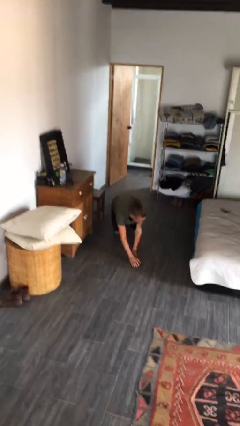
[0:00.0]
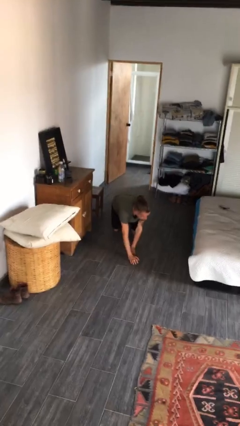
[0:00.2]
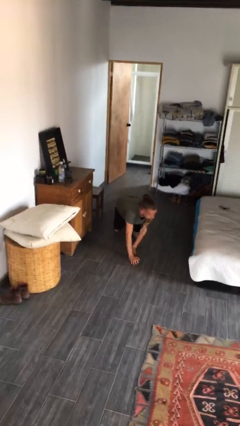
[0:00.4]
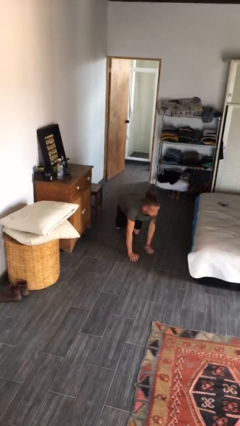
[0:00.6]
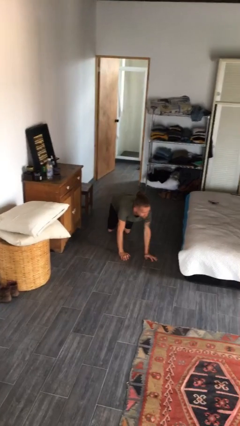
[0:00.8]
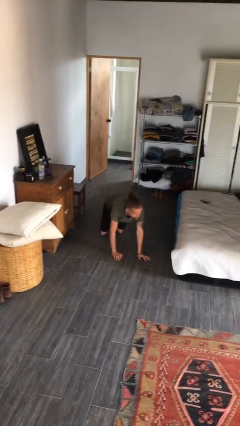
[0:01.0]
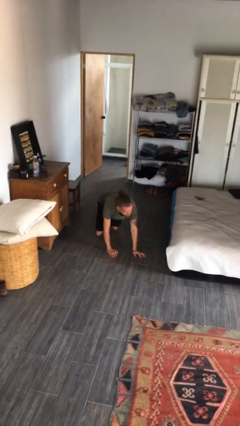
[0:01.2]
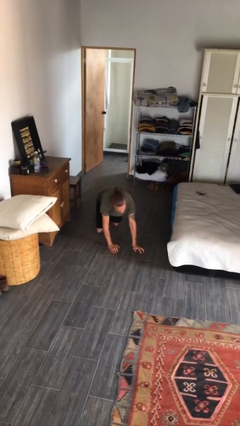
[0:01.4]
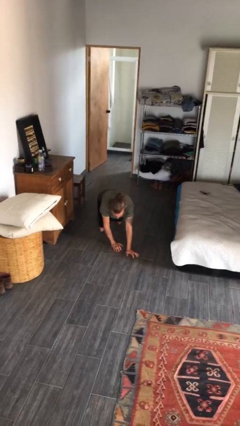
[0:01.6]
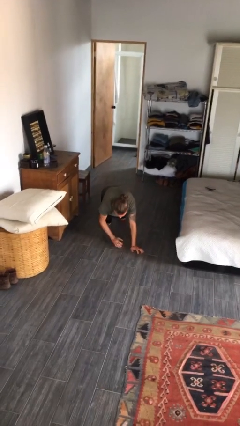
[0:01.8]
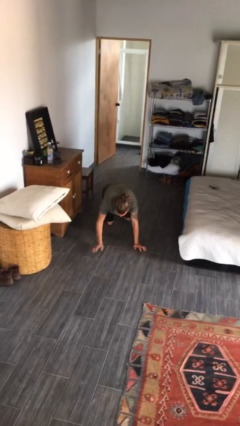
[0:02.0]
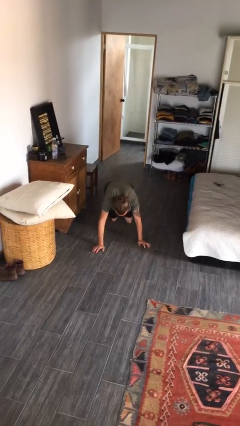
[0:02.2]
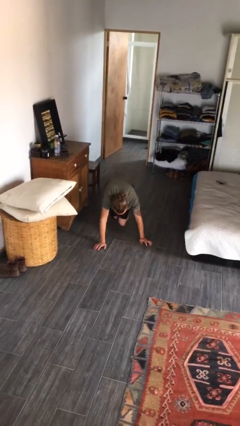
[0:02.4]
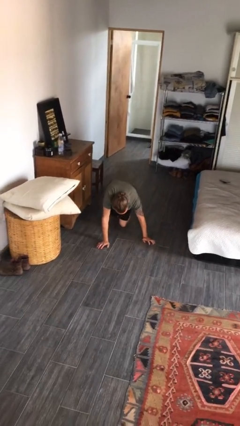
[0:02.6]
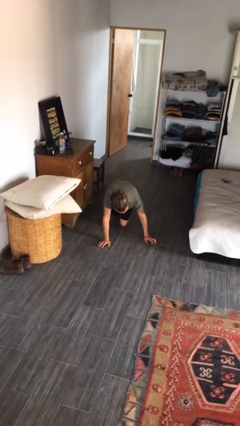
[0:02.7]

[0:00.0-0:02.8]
person crawls

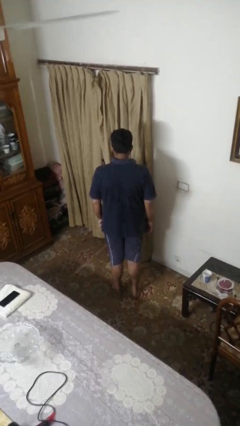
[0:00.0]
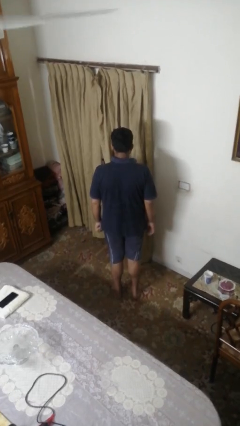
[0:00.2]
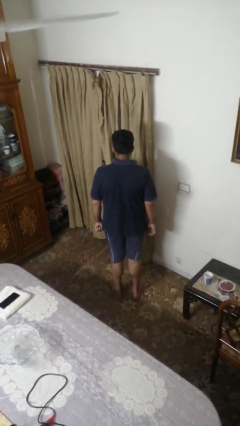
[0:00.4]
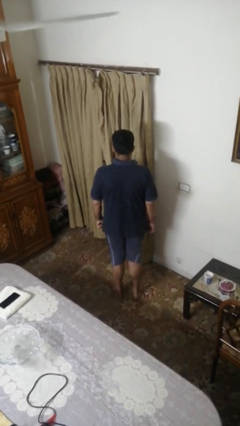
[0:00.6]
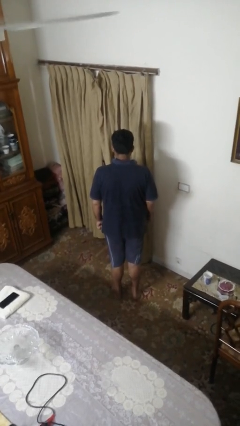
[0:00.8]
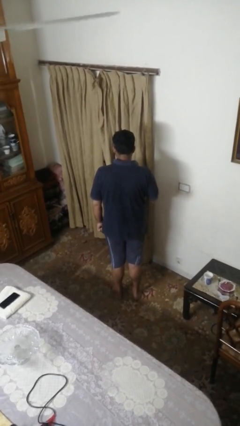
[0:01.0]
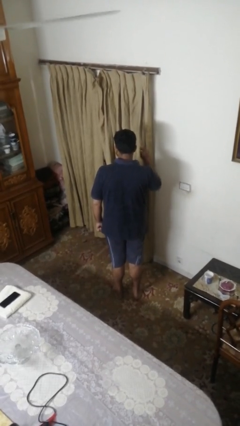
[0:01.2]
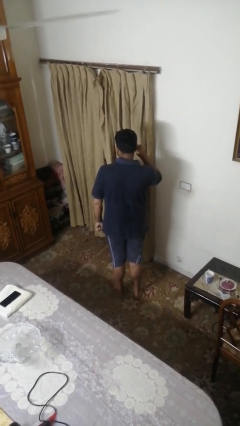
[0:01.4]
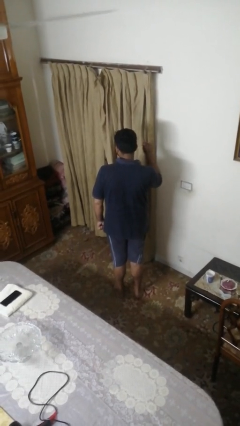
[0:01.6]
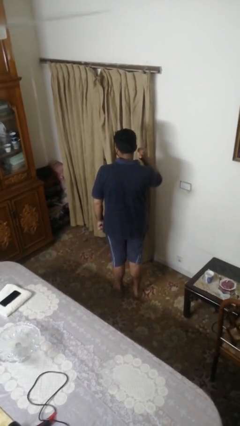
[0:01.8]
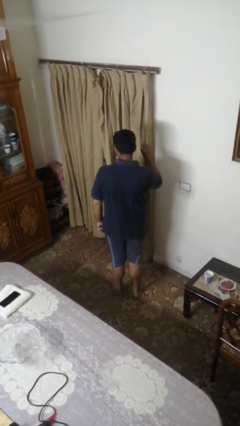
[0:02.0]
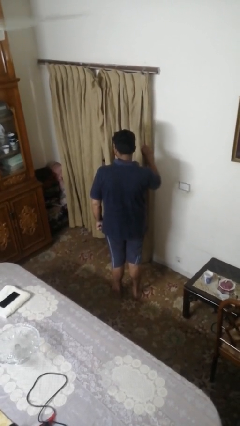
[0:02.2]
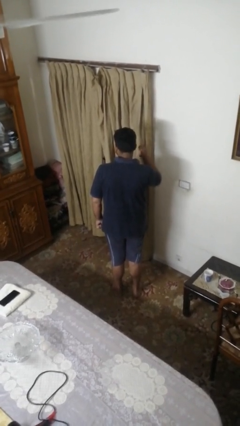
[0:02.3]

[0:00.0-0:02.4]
person gestures behind me

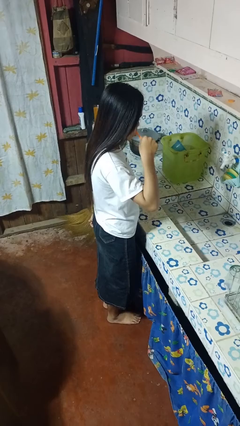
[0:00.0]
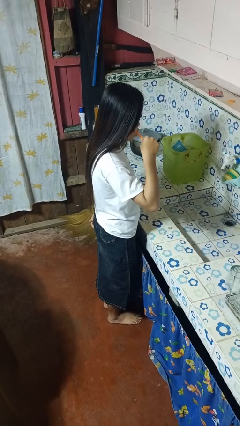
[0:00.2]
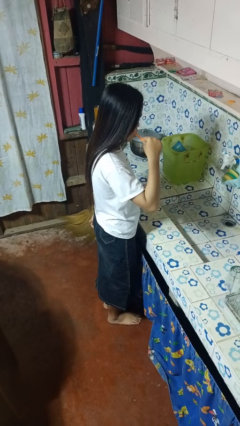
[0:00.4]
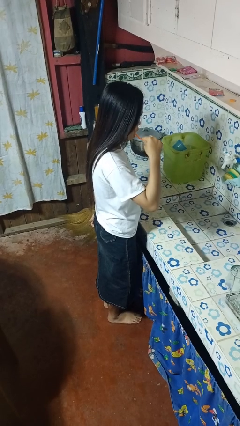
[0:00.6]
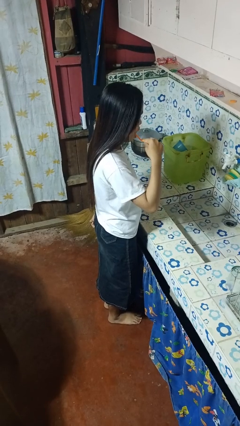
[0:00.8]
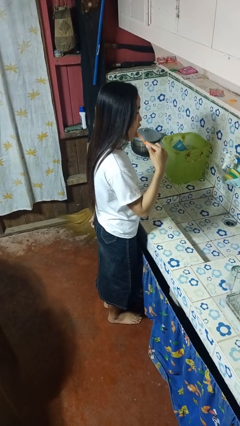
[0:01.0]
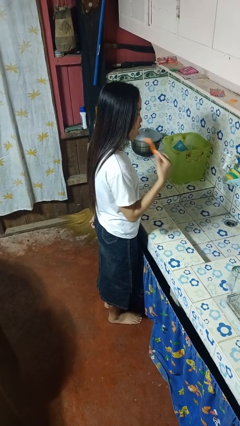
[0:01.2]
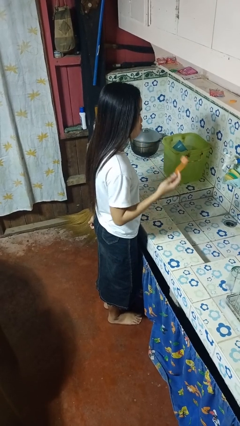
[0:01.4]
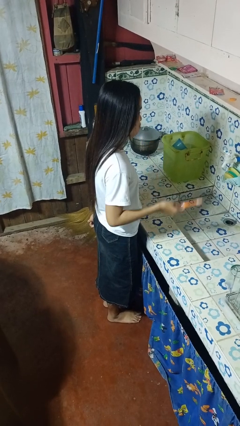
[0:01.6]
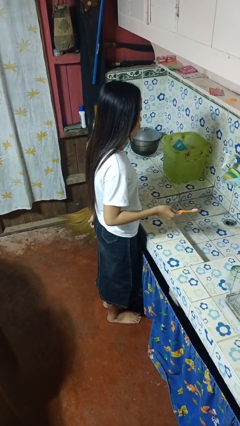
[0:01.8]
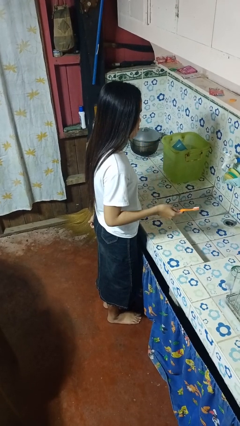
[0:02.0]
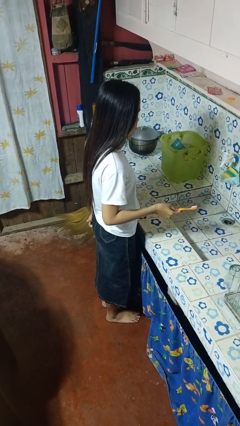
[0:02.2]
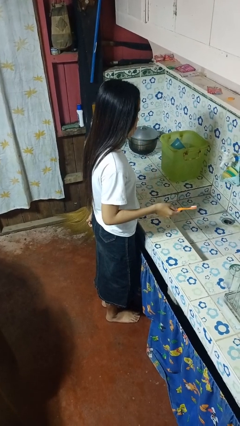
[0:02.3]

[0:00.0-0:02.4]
person brushes teeth

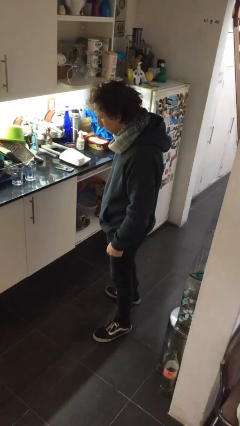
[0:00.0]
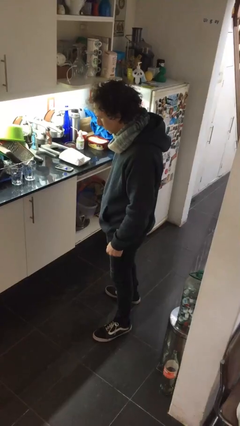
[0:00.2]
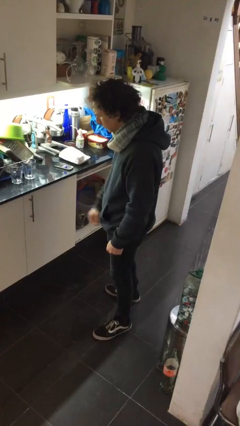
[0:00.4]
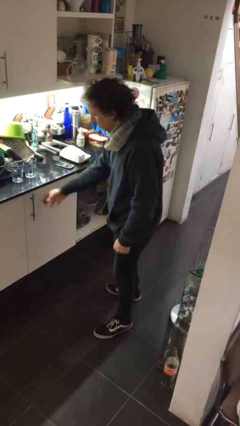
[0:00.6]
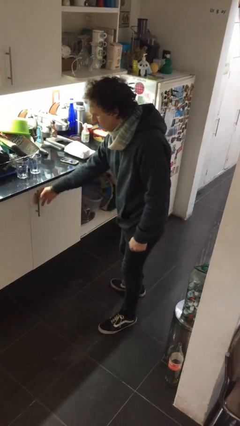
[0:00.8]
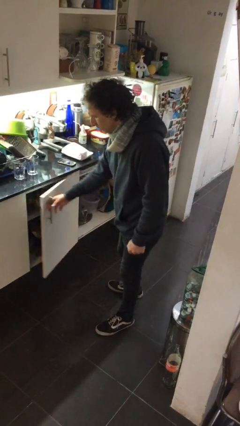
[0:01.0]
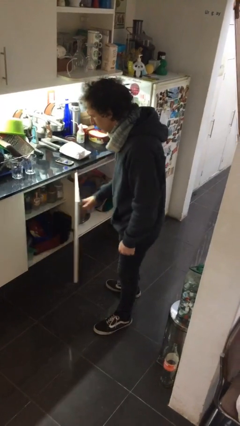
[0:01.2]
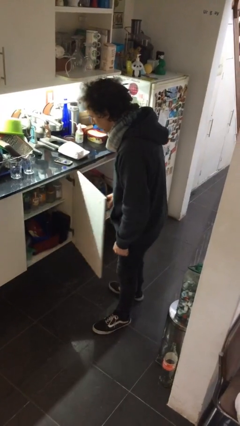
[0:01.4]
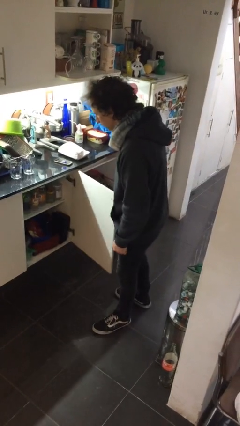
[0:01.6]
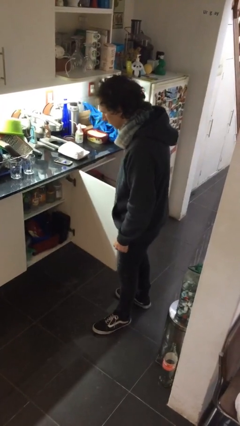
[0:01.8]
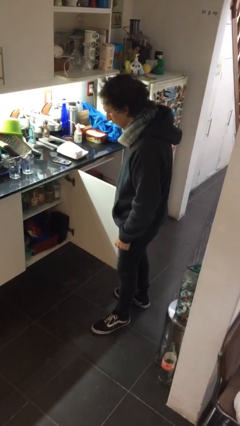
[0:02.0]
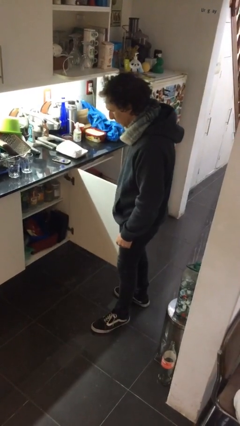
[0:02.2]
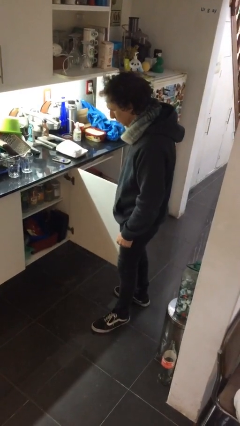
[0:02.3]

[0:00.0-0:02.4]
person closes cabinet

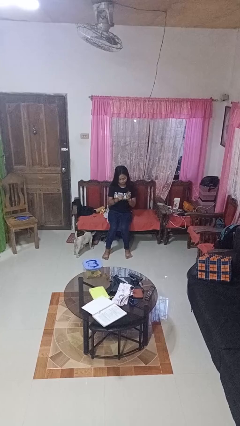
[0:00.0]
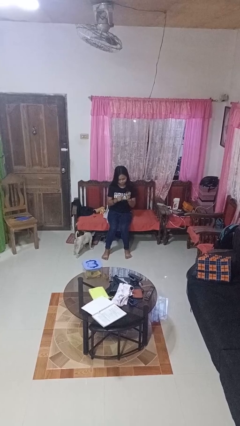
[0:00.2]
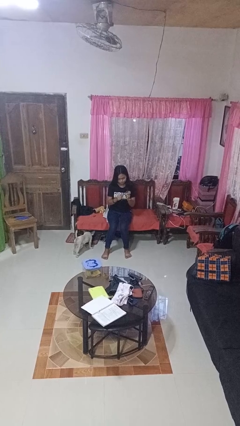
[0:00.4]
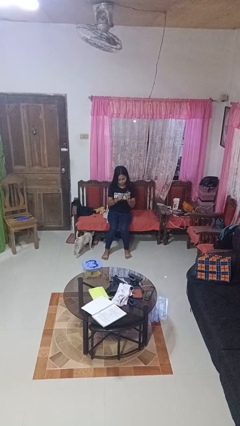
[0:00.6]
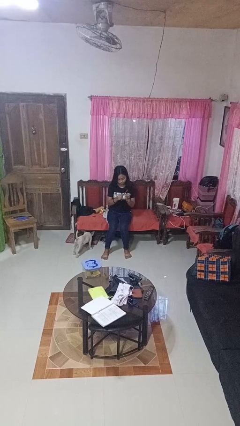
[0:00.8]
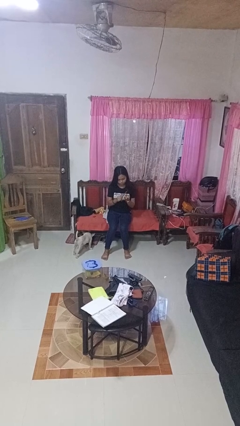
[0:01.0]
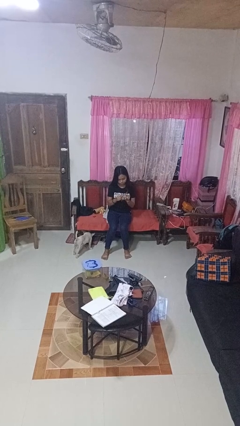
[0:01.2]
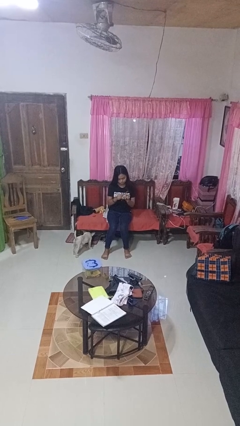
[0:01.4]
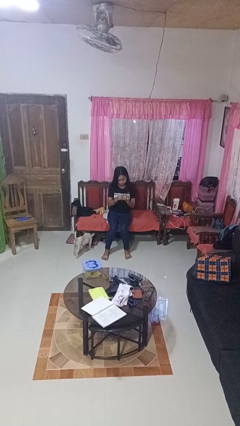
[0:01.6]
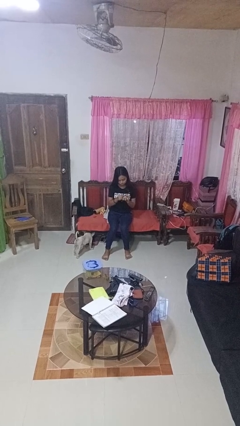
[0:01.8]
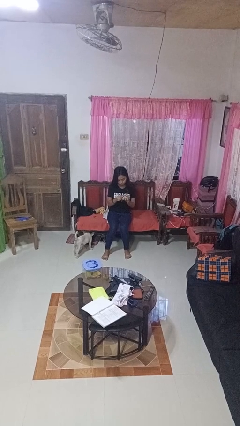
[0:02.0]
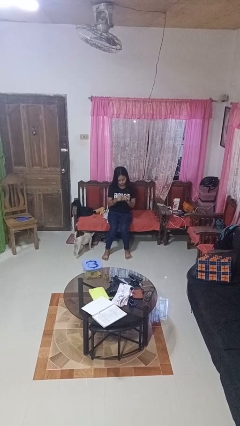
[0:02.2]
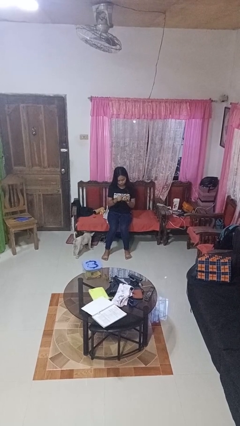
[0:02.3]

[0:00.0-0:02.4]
person files fingernails

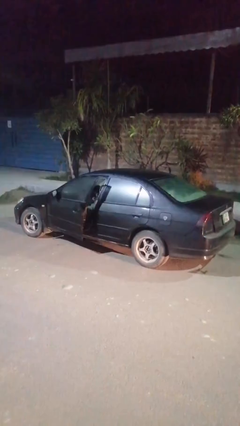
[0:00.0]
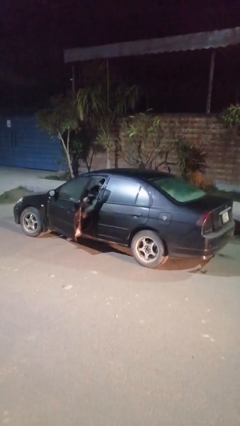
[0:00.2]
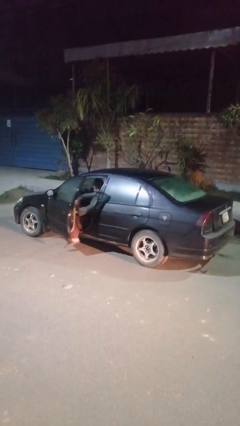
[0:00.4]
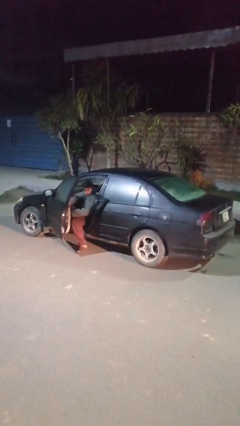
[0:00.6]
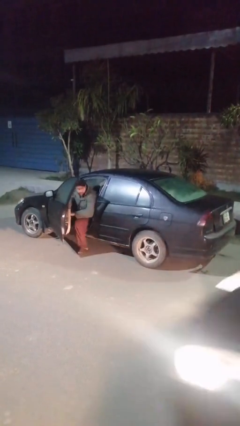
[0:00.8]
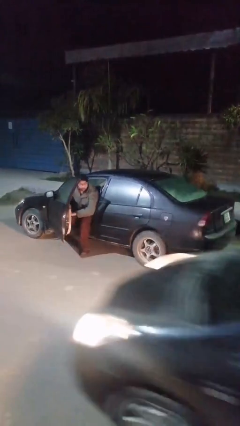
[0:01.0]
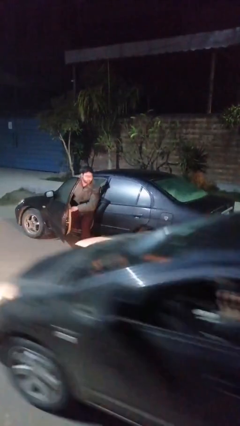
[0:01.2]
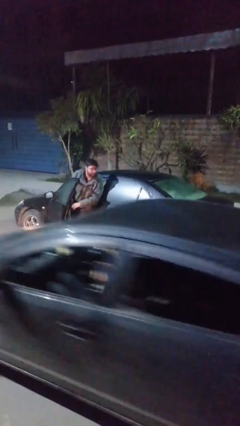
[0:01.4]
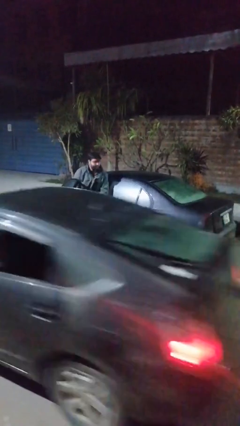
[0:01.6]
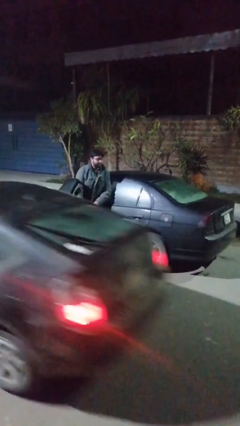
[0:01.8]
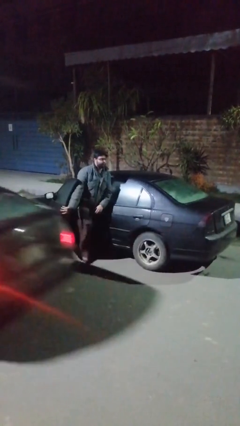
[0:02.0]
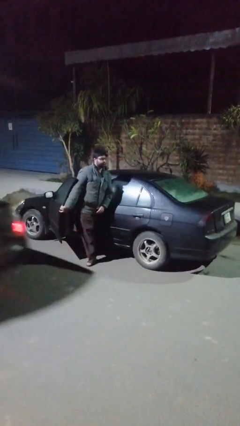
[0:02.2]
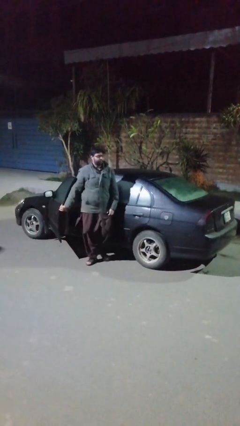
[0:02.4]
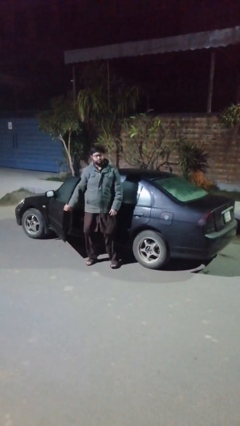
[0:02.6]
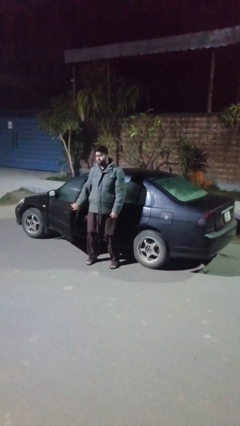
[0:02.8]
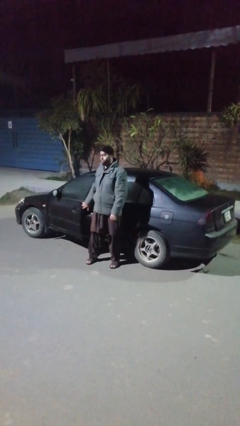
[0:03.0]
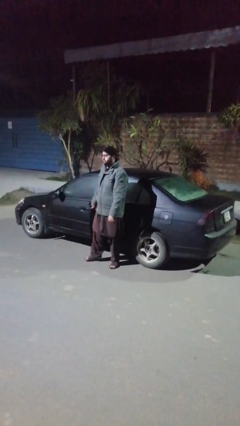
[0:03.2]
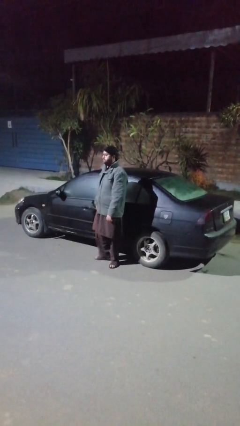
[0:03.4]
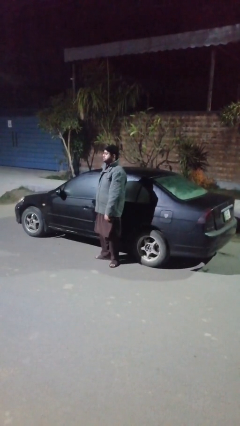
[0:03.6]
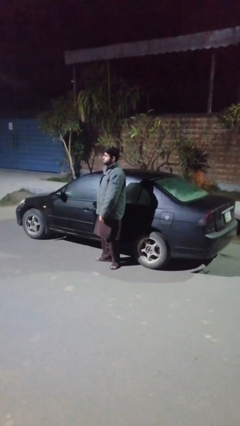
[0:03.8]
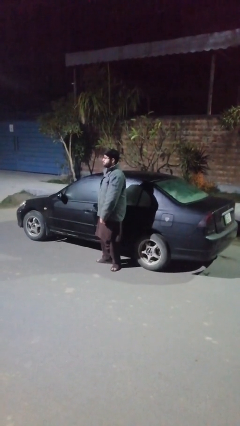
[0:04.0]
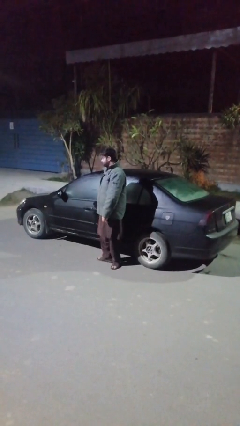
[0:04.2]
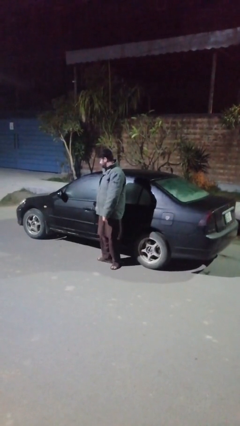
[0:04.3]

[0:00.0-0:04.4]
car drops off person

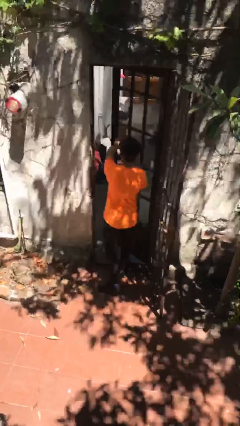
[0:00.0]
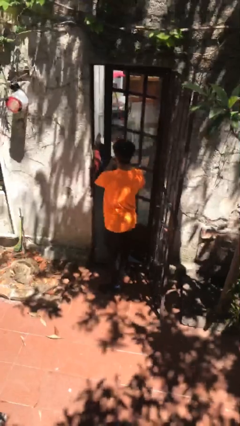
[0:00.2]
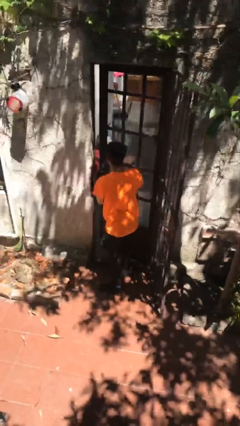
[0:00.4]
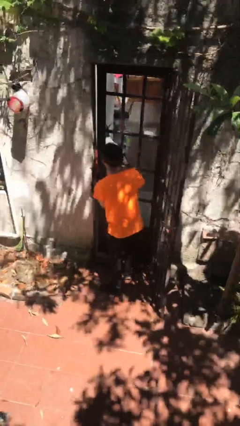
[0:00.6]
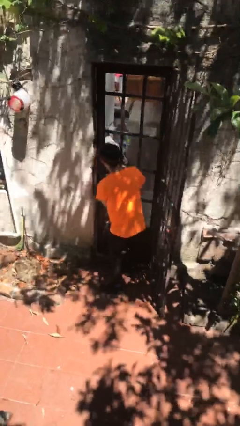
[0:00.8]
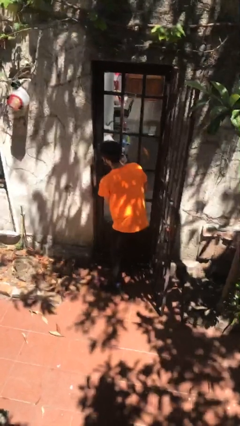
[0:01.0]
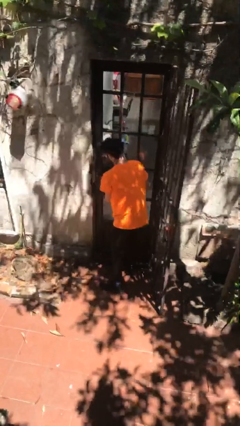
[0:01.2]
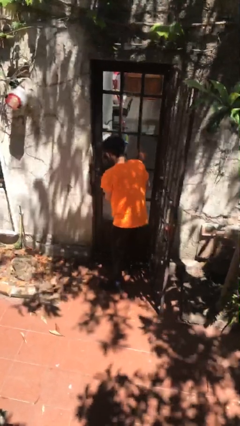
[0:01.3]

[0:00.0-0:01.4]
person closes facility door
